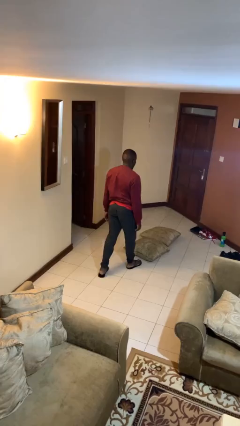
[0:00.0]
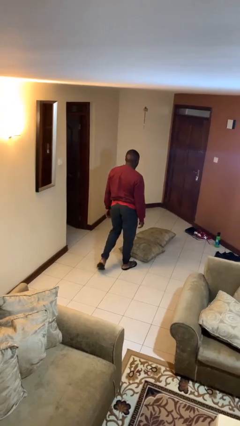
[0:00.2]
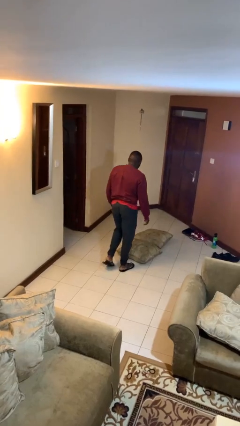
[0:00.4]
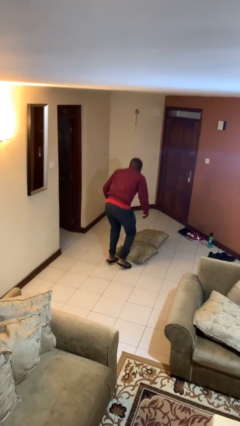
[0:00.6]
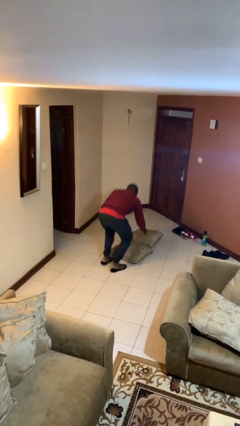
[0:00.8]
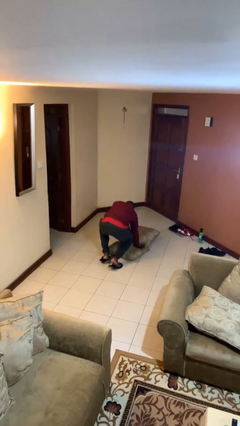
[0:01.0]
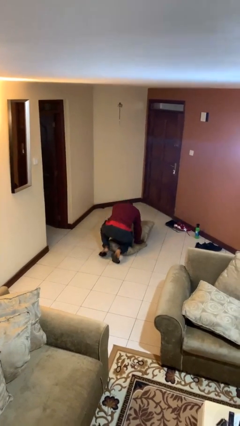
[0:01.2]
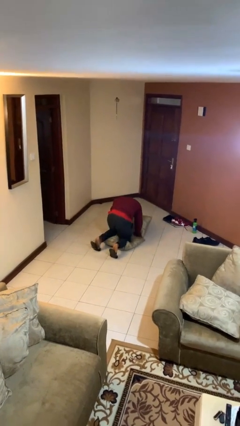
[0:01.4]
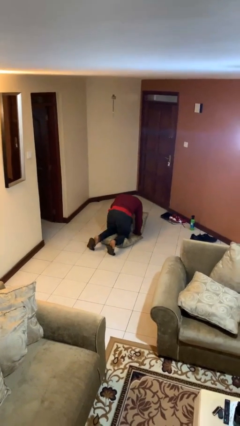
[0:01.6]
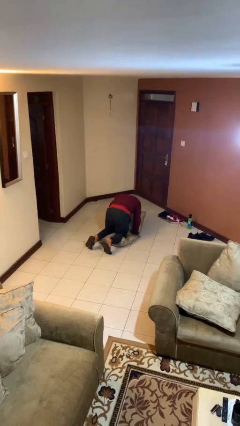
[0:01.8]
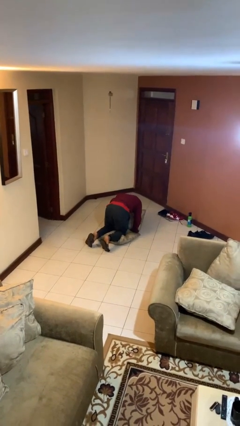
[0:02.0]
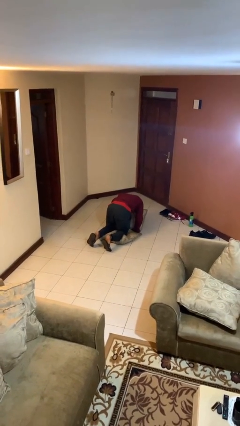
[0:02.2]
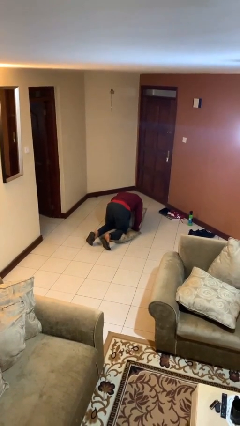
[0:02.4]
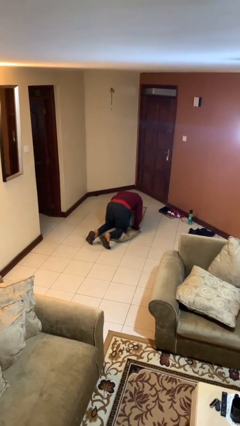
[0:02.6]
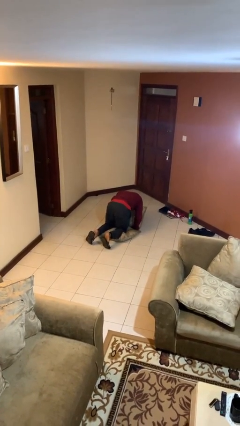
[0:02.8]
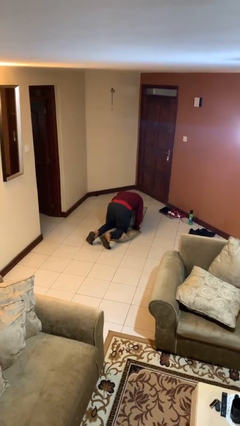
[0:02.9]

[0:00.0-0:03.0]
person trips on object on floor

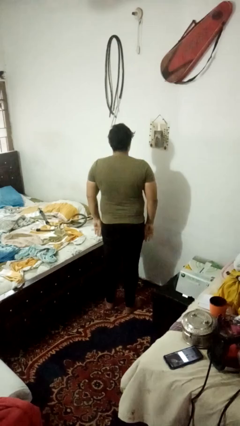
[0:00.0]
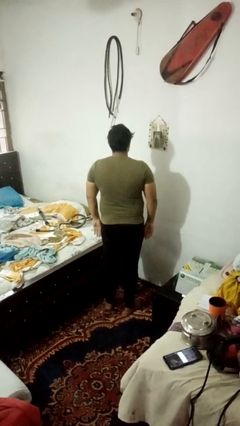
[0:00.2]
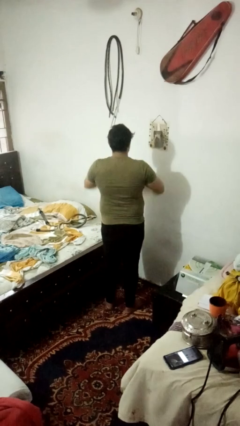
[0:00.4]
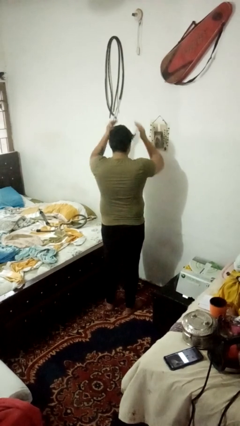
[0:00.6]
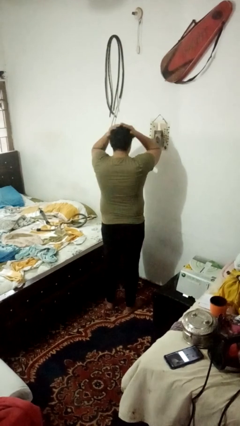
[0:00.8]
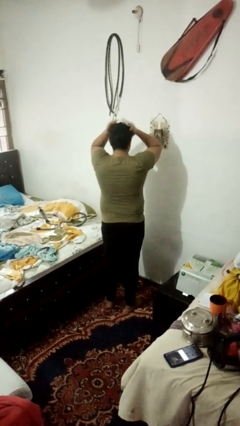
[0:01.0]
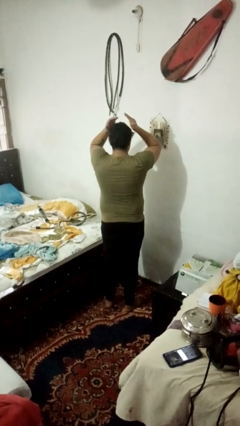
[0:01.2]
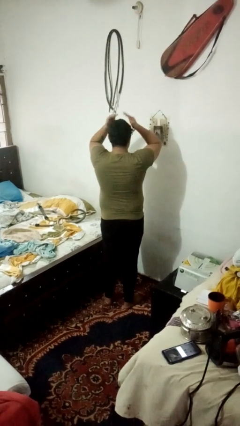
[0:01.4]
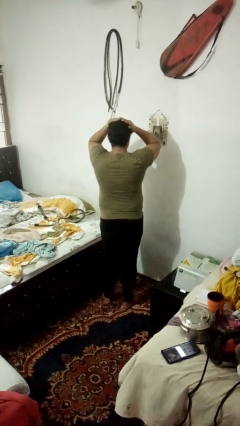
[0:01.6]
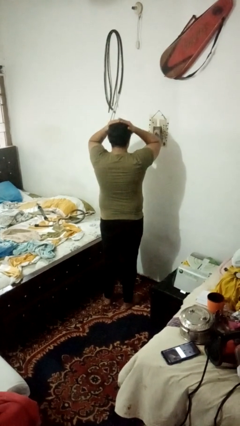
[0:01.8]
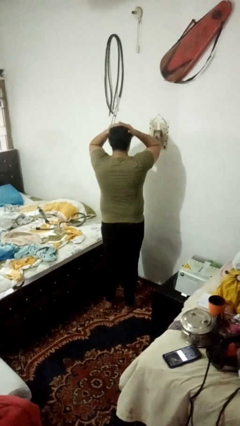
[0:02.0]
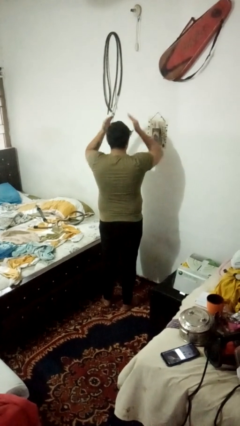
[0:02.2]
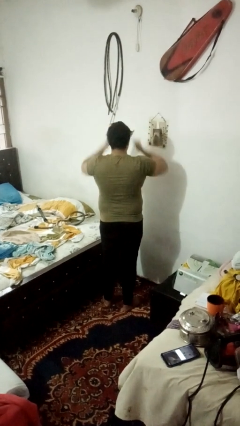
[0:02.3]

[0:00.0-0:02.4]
person pats head

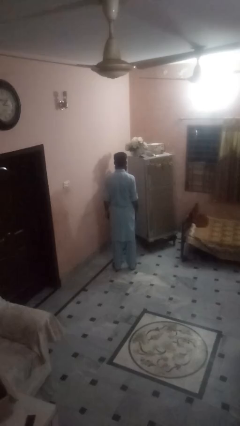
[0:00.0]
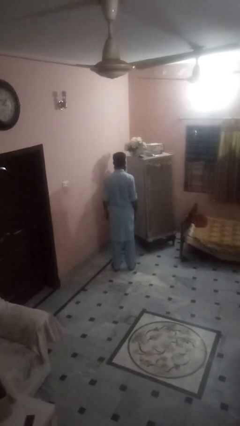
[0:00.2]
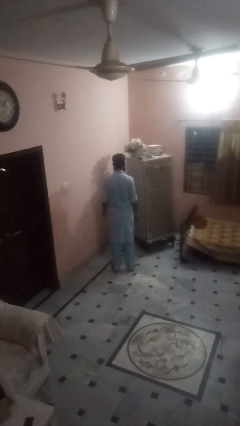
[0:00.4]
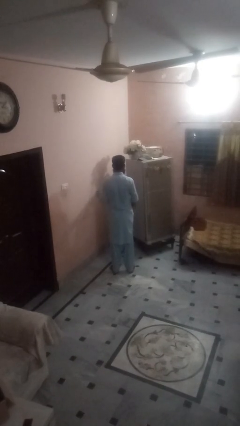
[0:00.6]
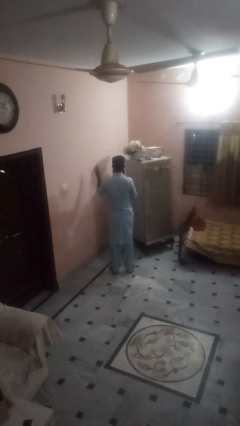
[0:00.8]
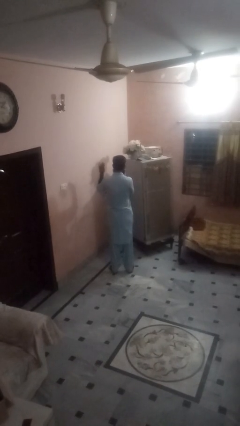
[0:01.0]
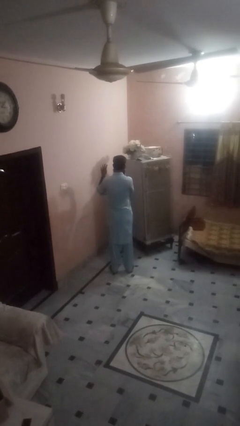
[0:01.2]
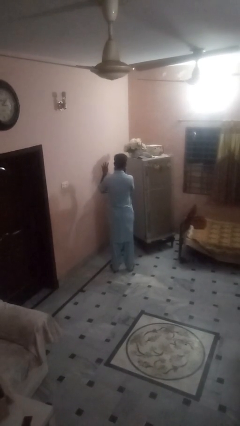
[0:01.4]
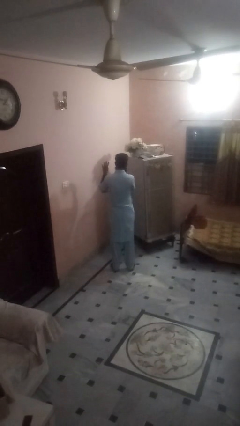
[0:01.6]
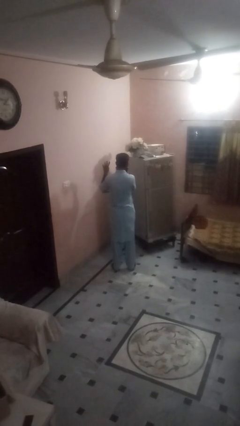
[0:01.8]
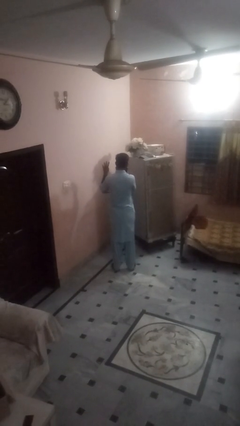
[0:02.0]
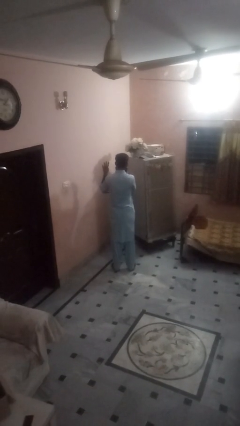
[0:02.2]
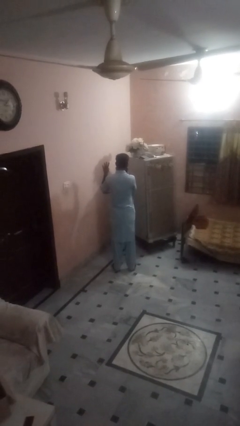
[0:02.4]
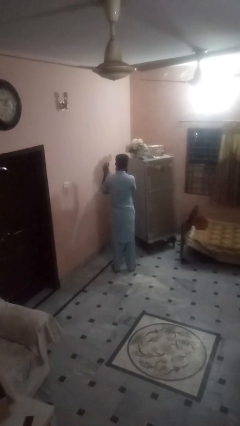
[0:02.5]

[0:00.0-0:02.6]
person gestures number four

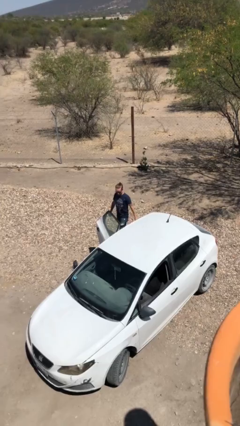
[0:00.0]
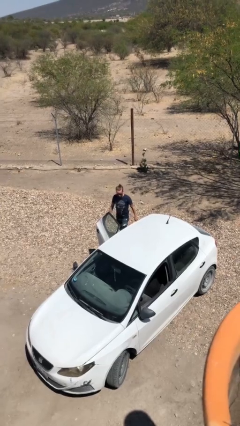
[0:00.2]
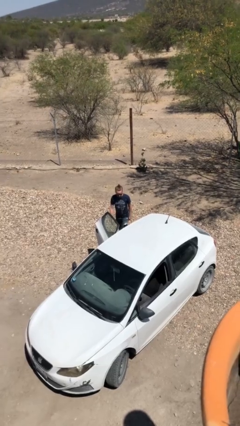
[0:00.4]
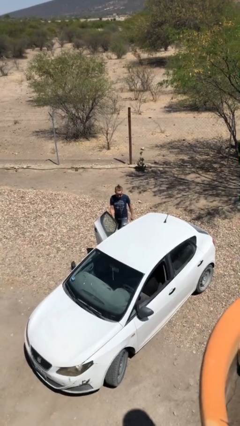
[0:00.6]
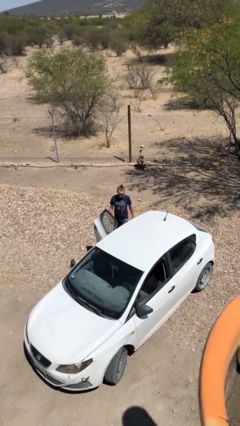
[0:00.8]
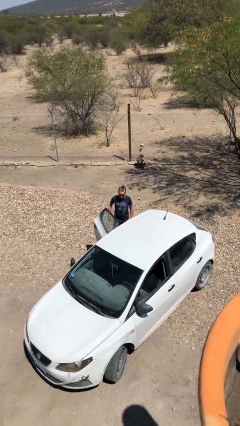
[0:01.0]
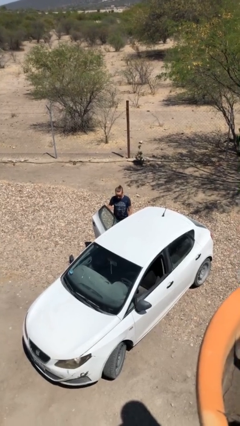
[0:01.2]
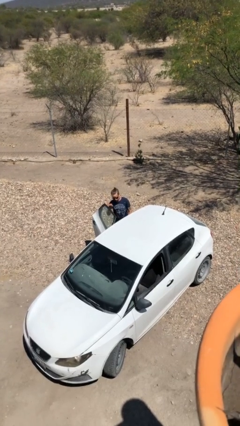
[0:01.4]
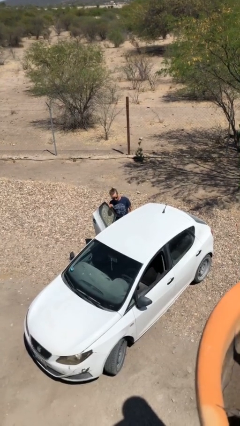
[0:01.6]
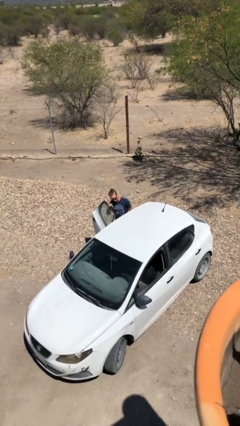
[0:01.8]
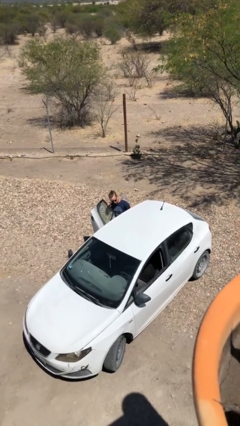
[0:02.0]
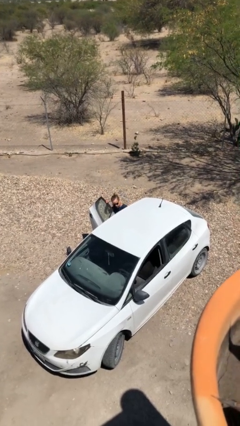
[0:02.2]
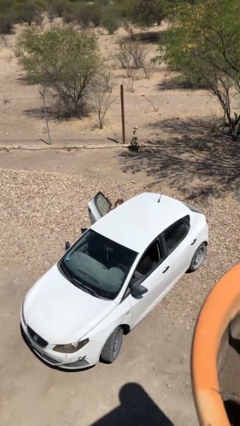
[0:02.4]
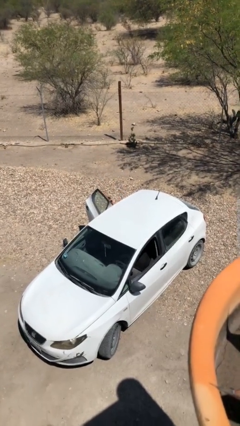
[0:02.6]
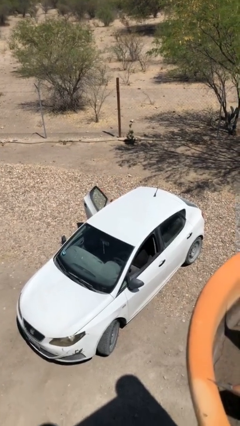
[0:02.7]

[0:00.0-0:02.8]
person enters car

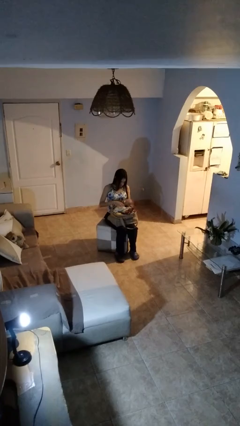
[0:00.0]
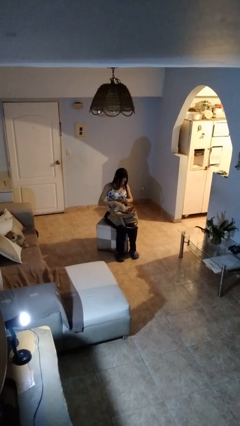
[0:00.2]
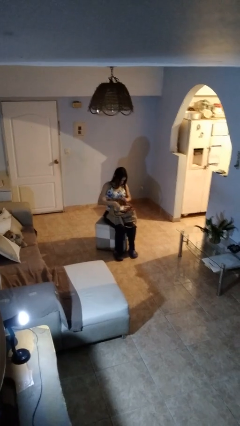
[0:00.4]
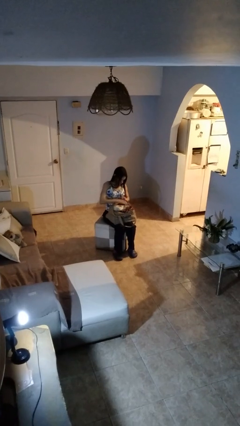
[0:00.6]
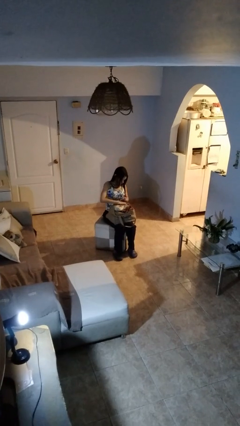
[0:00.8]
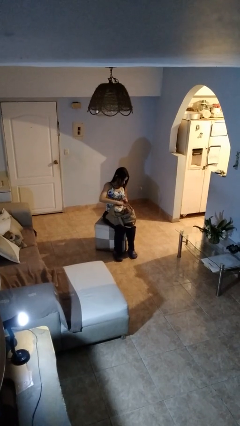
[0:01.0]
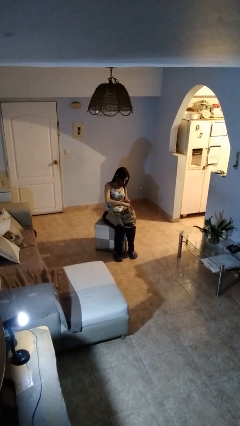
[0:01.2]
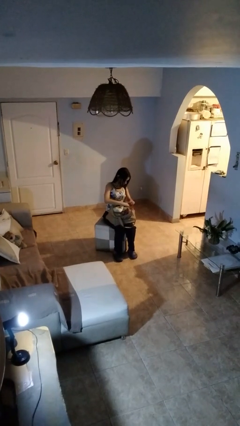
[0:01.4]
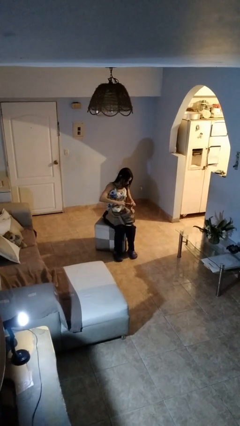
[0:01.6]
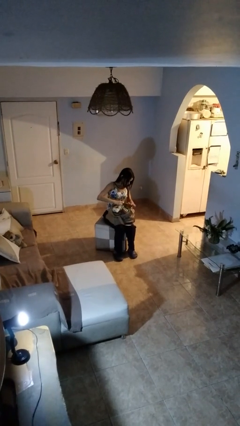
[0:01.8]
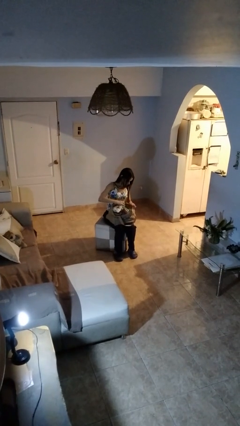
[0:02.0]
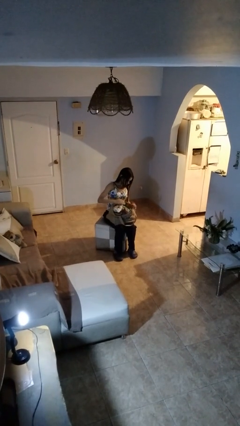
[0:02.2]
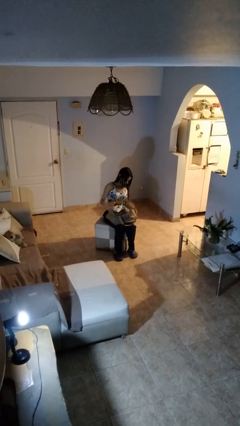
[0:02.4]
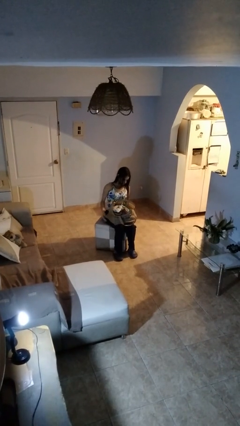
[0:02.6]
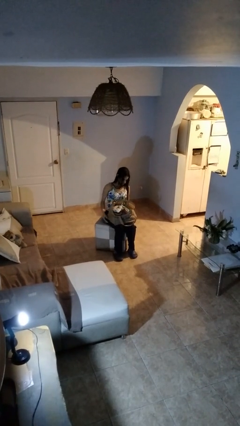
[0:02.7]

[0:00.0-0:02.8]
person searches in bag

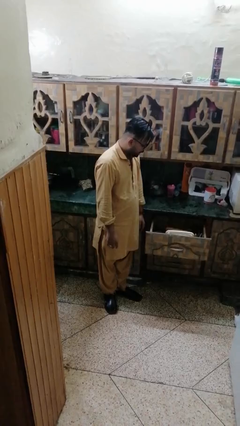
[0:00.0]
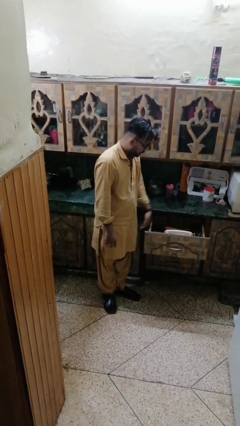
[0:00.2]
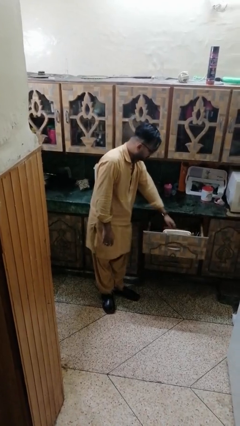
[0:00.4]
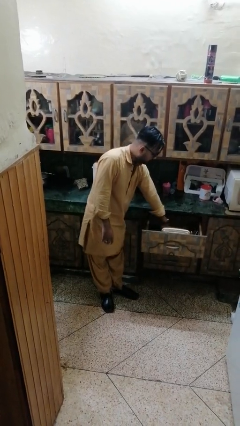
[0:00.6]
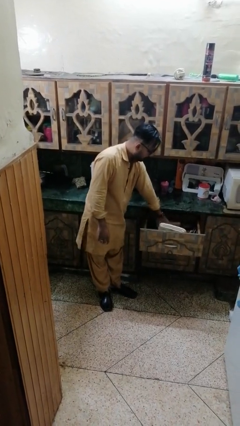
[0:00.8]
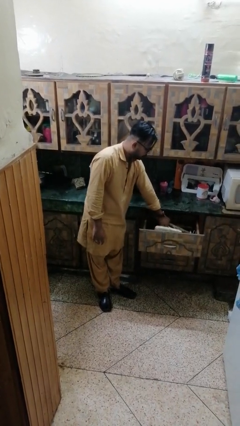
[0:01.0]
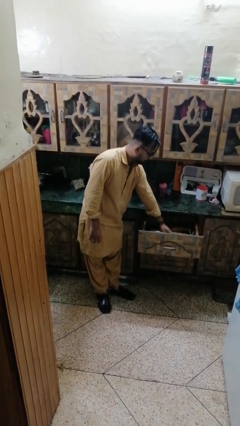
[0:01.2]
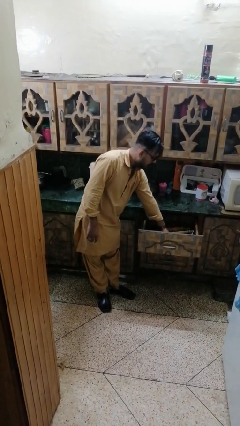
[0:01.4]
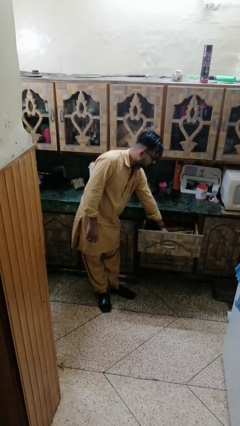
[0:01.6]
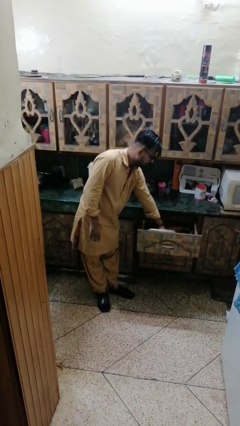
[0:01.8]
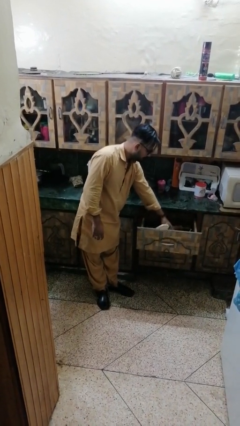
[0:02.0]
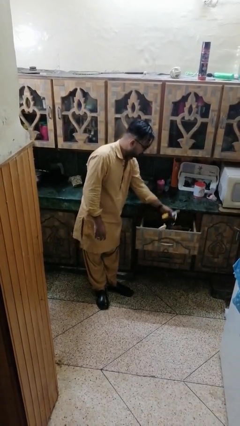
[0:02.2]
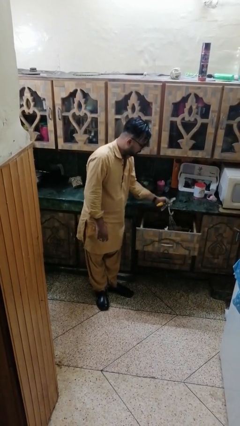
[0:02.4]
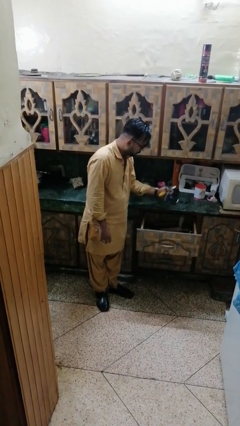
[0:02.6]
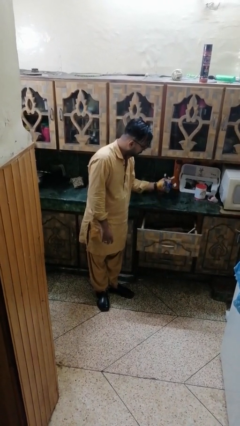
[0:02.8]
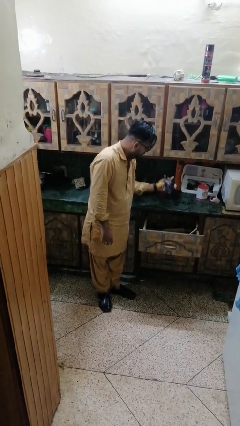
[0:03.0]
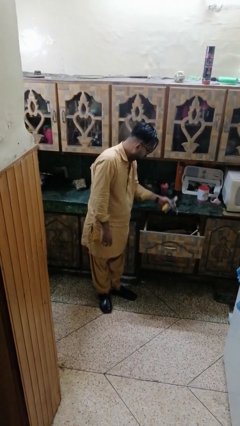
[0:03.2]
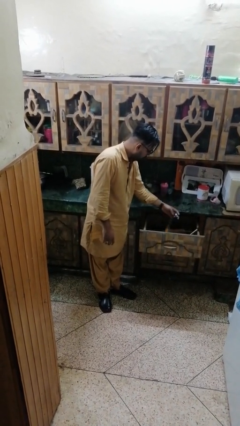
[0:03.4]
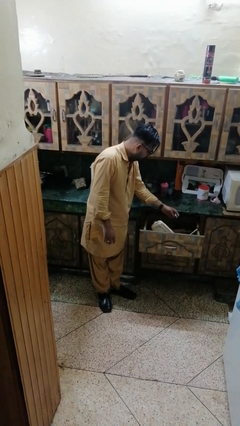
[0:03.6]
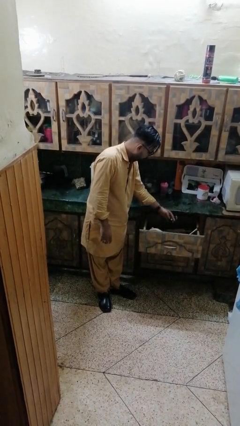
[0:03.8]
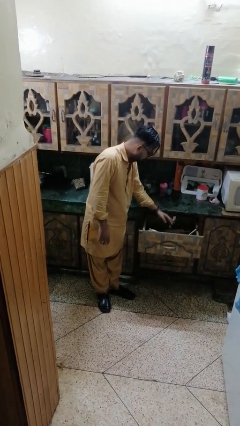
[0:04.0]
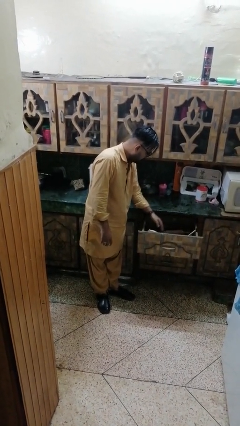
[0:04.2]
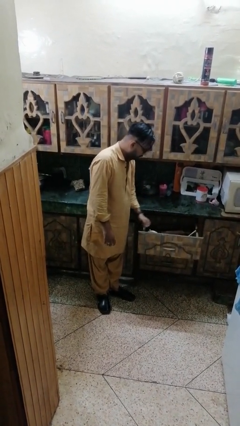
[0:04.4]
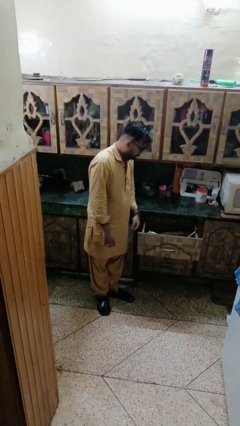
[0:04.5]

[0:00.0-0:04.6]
person searches in kitchen drawer
